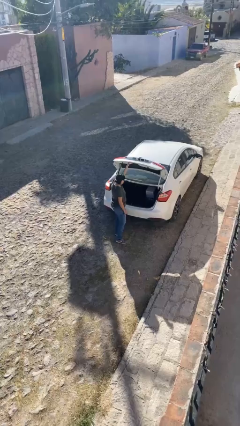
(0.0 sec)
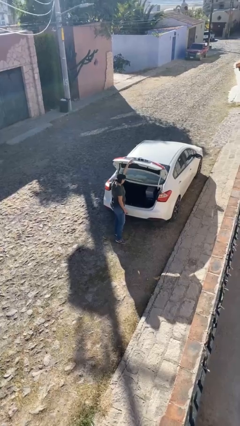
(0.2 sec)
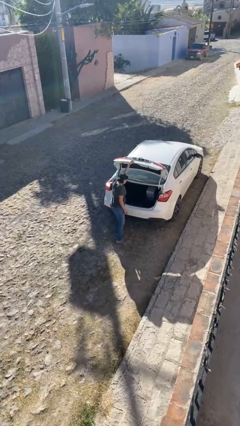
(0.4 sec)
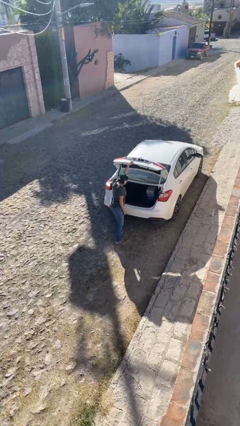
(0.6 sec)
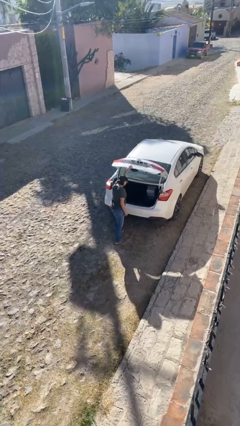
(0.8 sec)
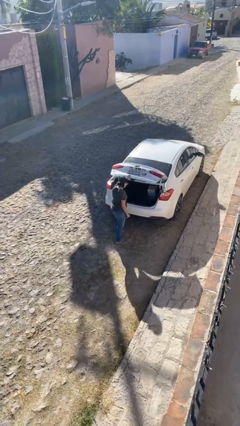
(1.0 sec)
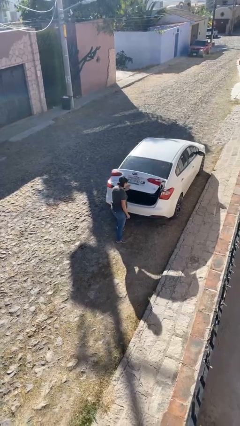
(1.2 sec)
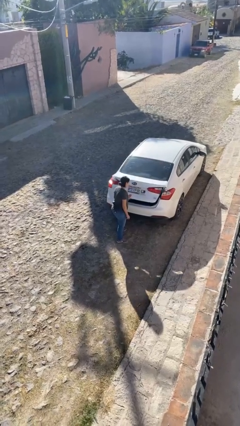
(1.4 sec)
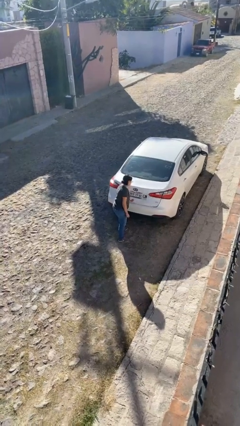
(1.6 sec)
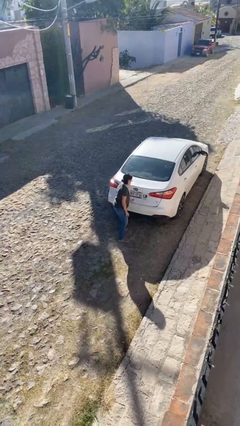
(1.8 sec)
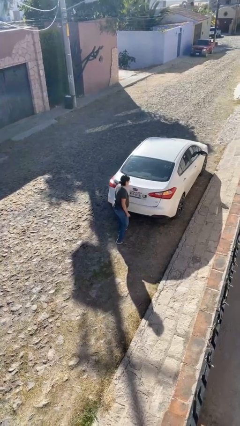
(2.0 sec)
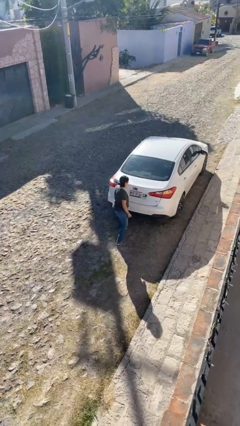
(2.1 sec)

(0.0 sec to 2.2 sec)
person closes car trunk

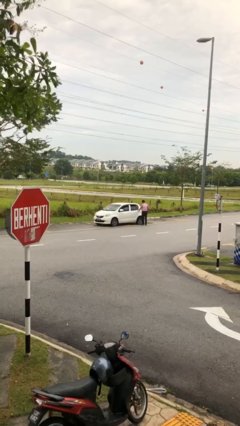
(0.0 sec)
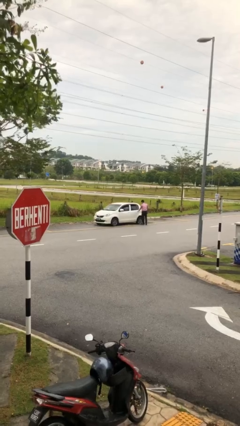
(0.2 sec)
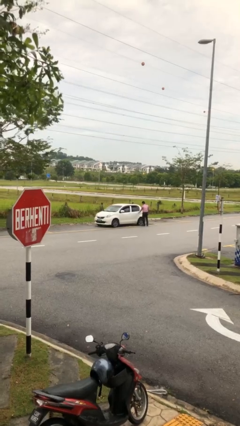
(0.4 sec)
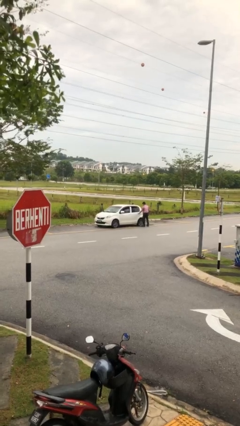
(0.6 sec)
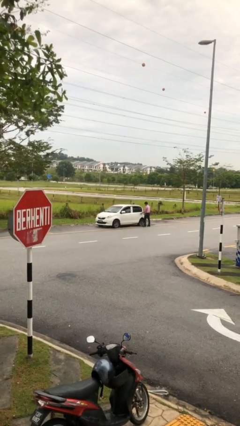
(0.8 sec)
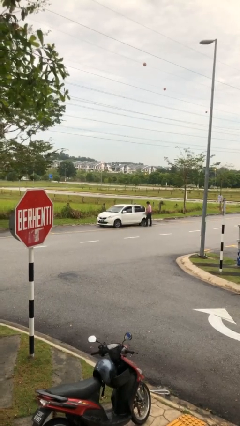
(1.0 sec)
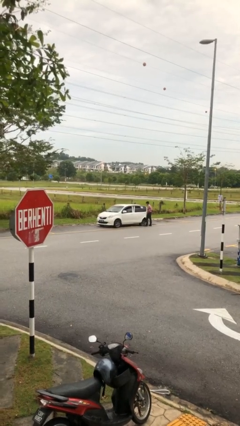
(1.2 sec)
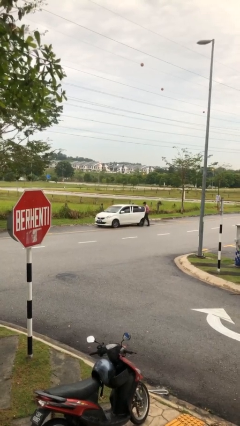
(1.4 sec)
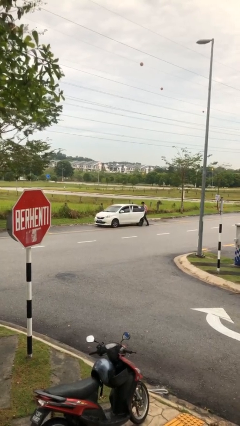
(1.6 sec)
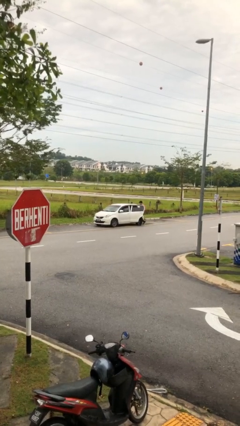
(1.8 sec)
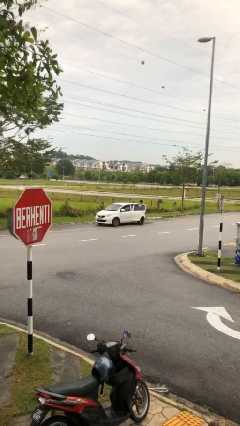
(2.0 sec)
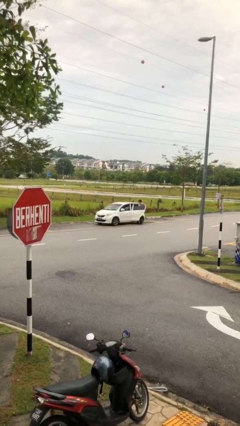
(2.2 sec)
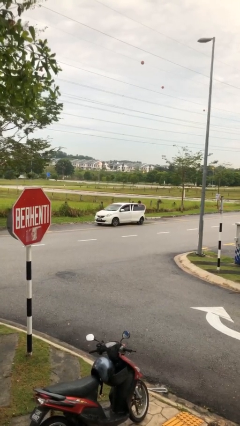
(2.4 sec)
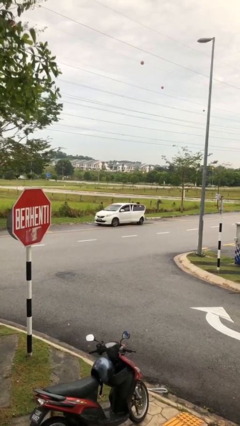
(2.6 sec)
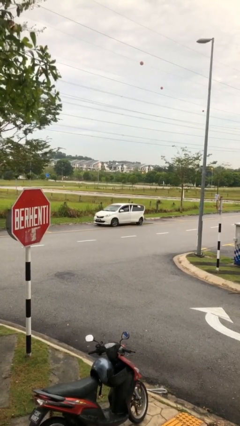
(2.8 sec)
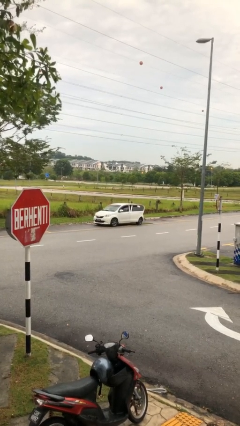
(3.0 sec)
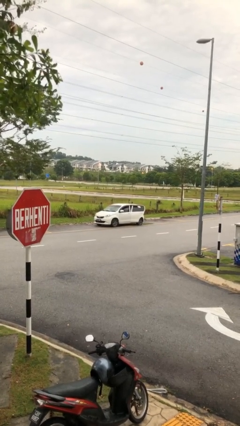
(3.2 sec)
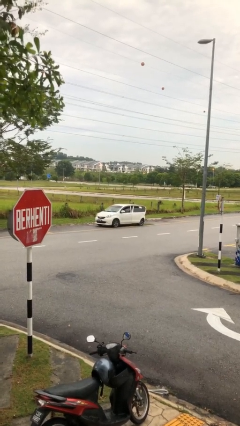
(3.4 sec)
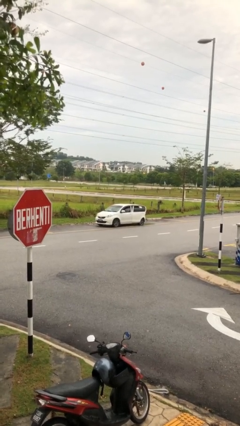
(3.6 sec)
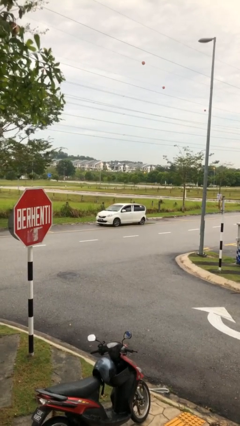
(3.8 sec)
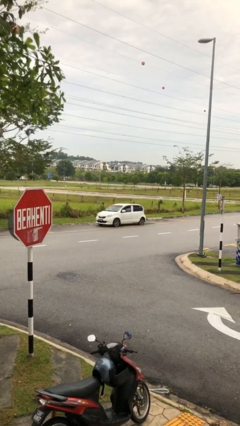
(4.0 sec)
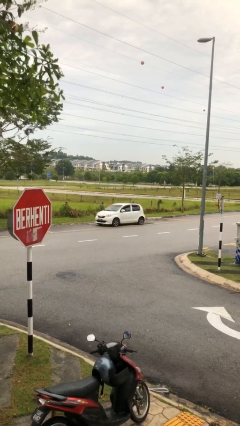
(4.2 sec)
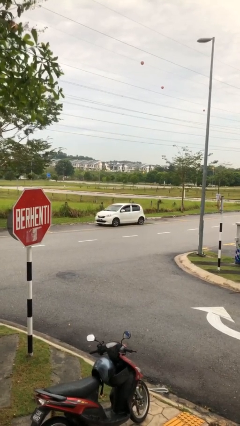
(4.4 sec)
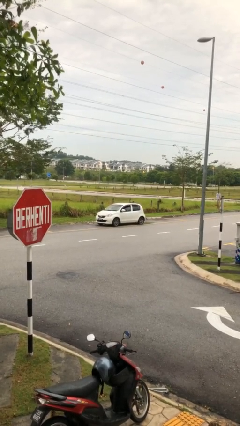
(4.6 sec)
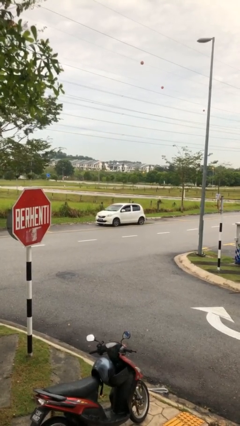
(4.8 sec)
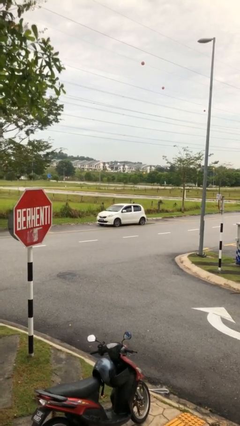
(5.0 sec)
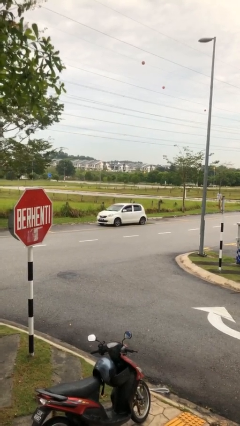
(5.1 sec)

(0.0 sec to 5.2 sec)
car picks up person

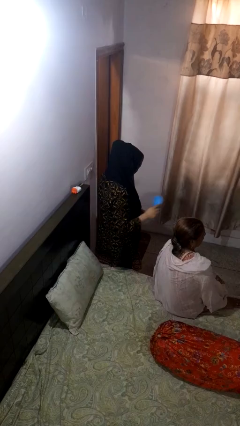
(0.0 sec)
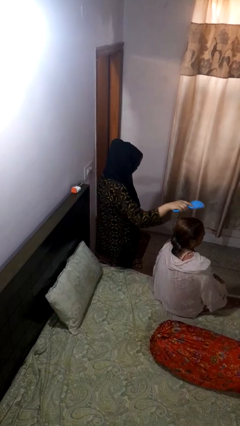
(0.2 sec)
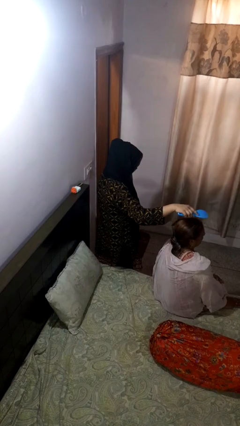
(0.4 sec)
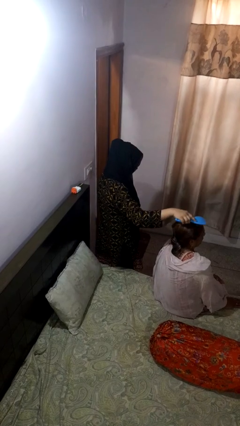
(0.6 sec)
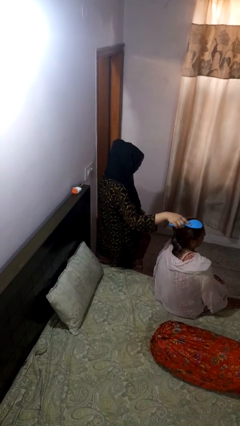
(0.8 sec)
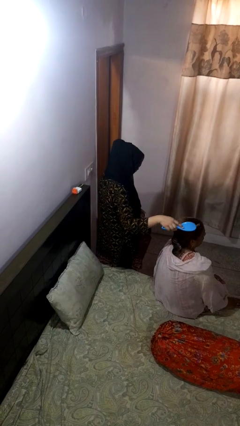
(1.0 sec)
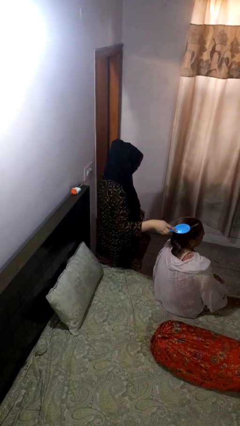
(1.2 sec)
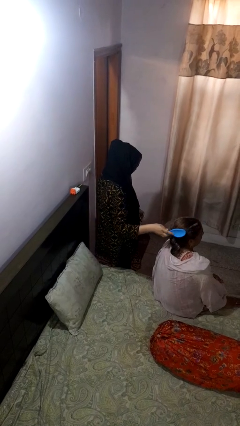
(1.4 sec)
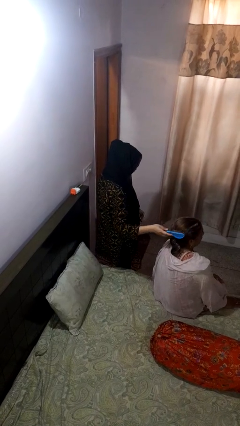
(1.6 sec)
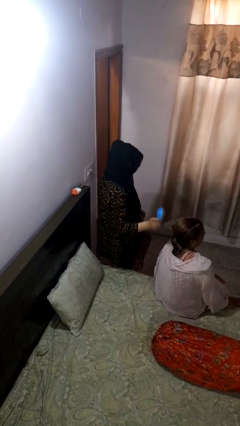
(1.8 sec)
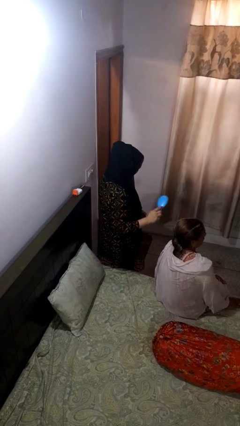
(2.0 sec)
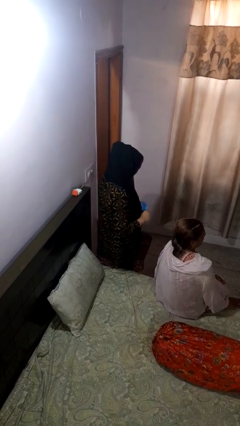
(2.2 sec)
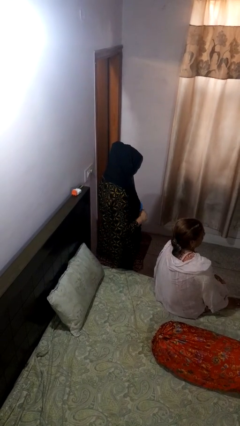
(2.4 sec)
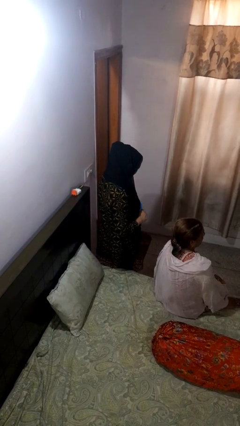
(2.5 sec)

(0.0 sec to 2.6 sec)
person brushes hair of person

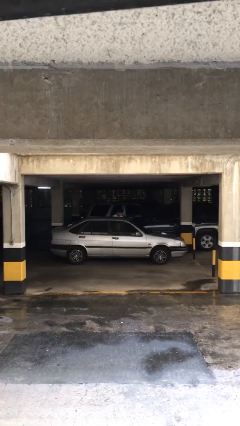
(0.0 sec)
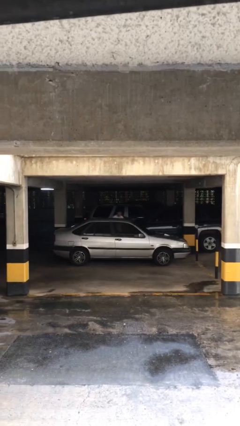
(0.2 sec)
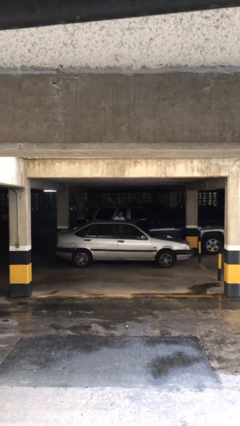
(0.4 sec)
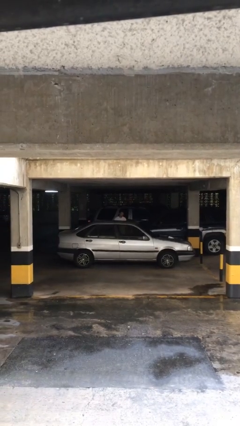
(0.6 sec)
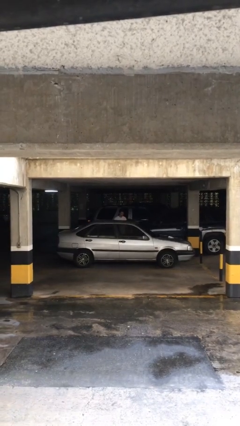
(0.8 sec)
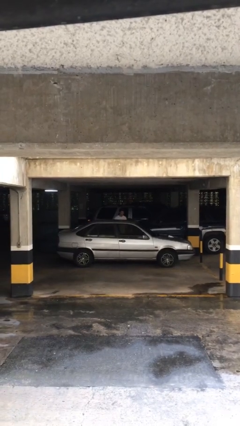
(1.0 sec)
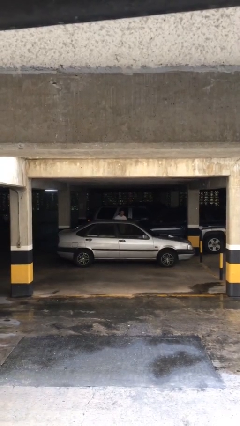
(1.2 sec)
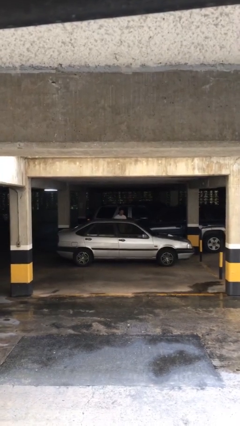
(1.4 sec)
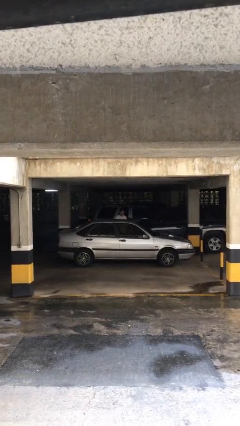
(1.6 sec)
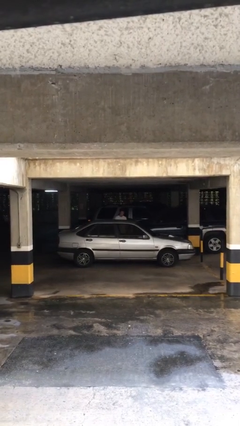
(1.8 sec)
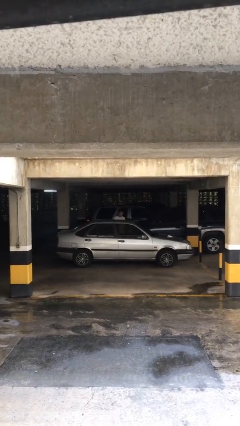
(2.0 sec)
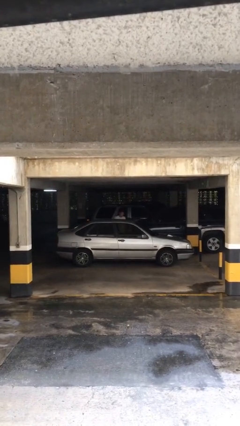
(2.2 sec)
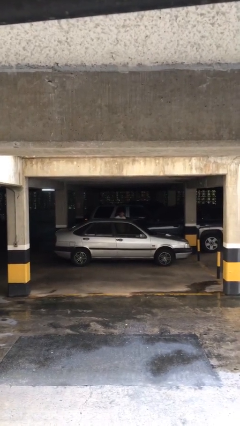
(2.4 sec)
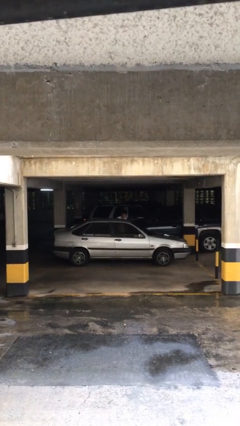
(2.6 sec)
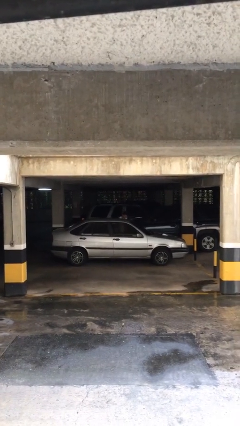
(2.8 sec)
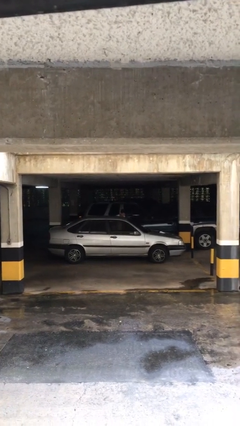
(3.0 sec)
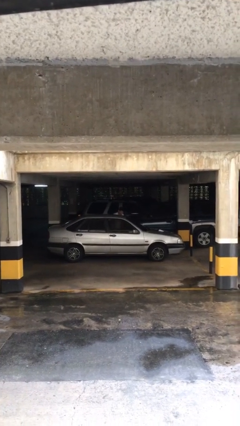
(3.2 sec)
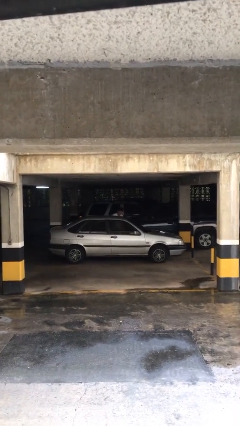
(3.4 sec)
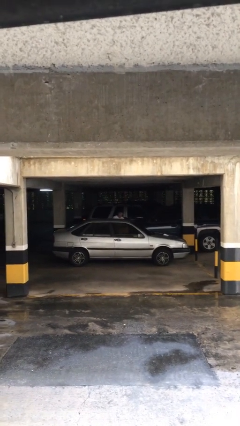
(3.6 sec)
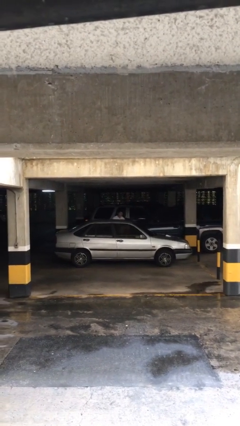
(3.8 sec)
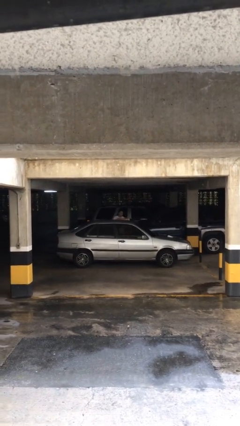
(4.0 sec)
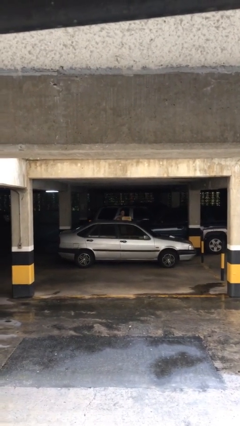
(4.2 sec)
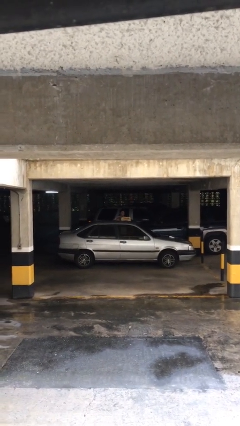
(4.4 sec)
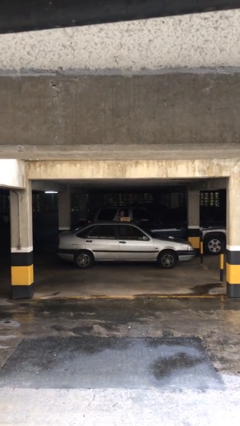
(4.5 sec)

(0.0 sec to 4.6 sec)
person unloads car

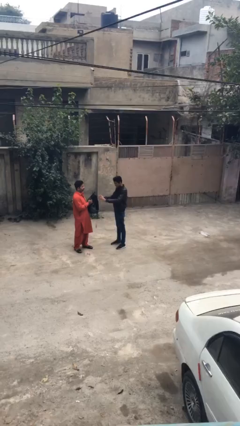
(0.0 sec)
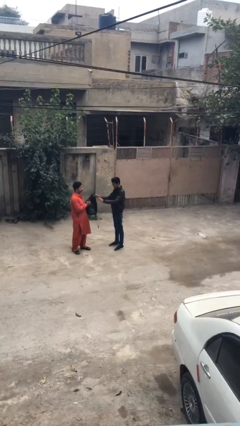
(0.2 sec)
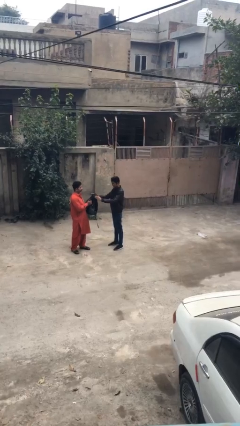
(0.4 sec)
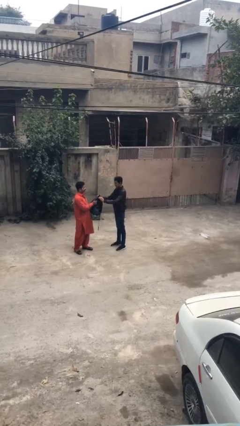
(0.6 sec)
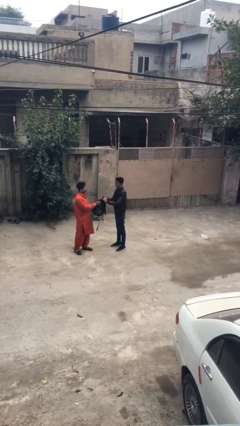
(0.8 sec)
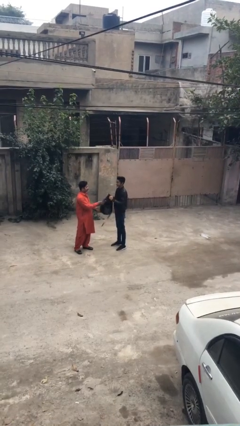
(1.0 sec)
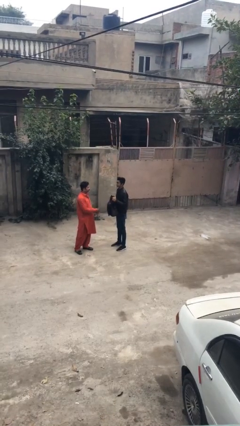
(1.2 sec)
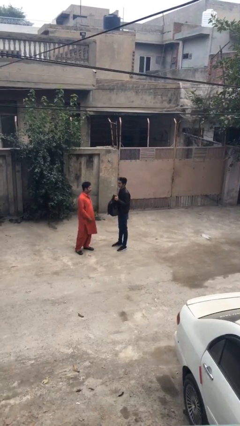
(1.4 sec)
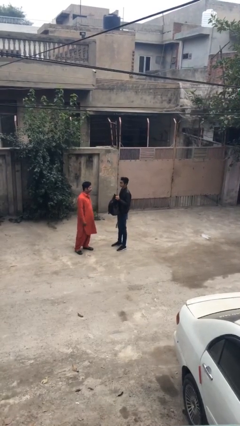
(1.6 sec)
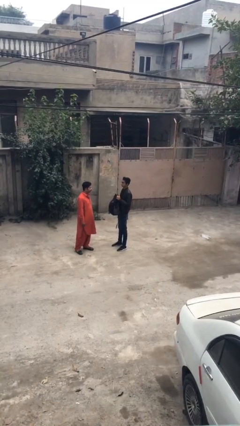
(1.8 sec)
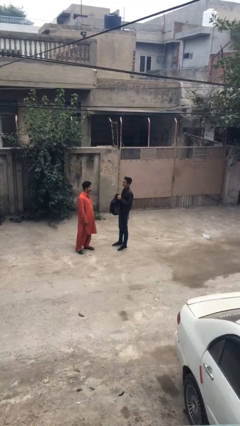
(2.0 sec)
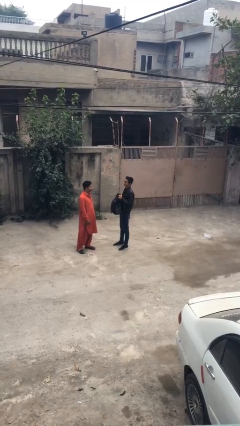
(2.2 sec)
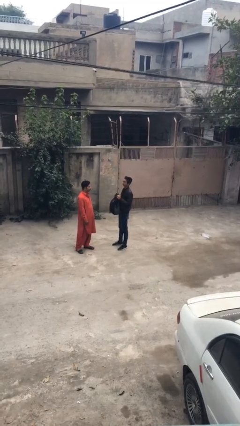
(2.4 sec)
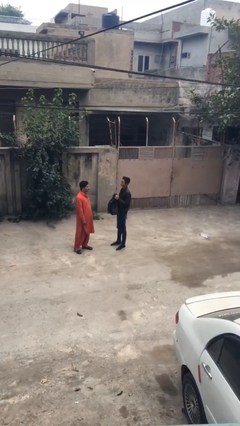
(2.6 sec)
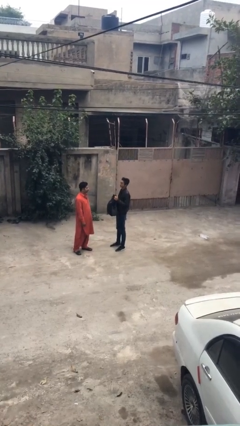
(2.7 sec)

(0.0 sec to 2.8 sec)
person transfers object to person
